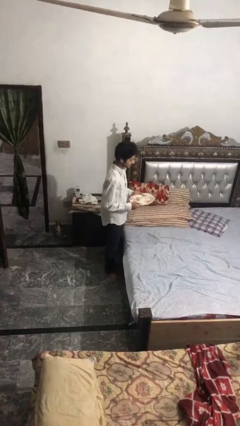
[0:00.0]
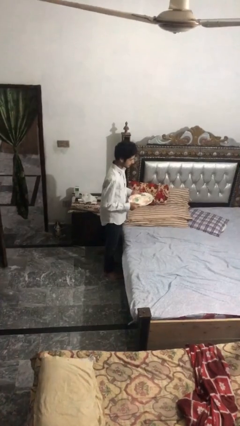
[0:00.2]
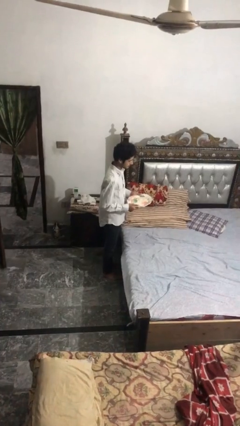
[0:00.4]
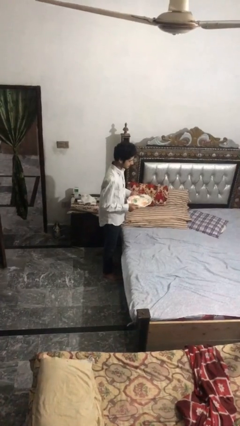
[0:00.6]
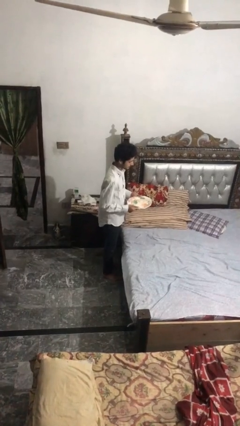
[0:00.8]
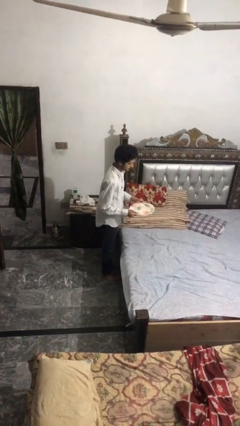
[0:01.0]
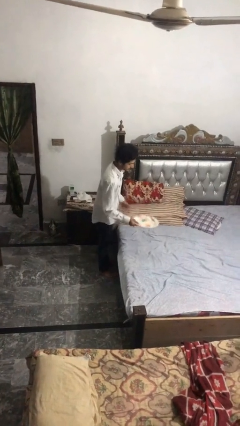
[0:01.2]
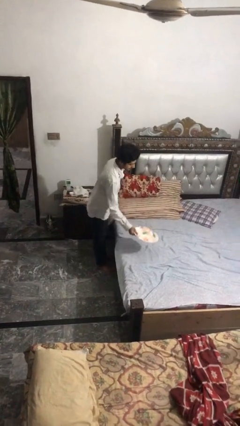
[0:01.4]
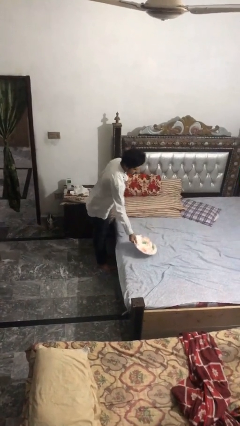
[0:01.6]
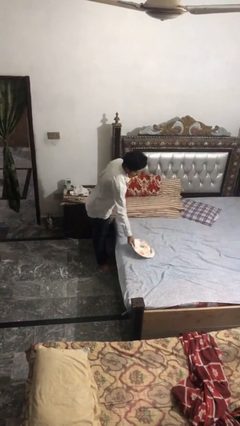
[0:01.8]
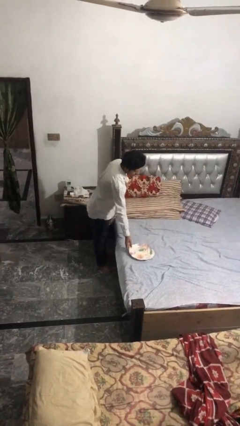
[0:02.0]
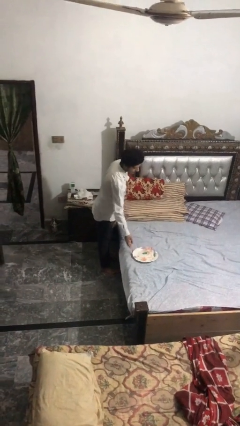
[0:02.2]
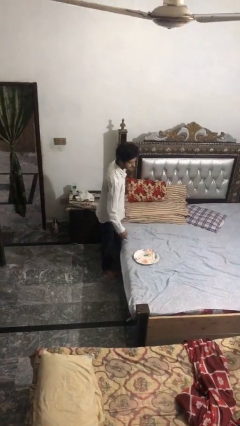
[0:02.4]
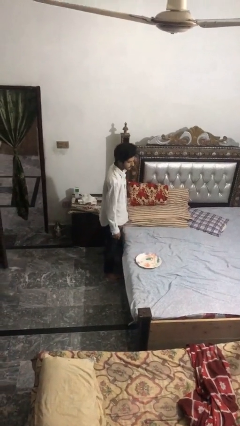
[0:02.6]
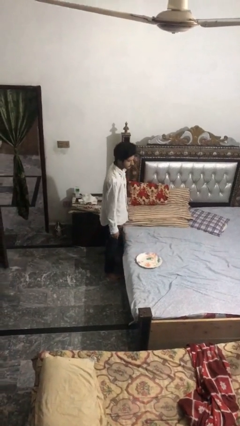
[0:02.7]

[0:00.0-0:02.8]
person puts down object on bed

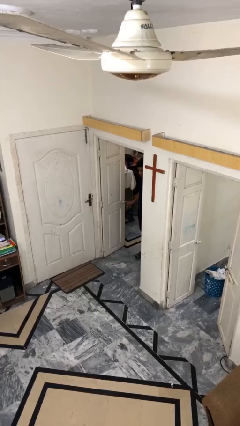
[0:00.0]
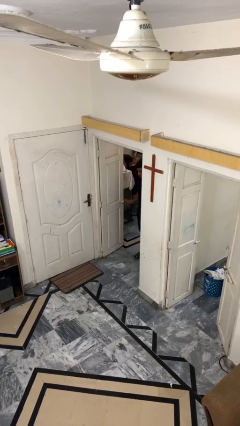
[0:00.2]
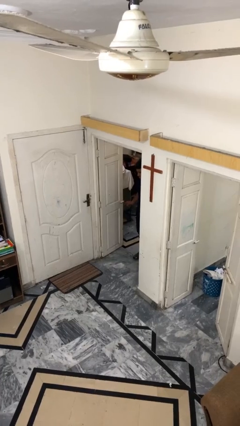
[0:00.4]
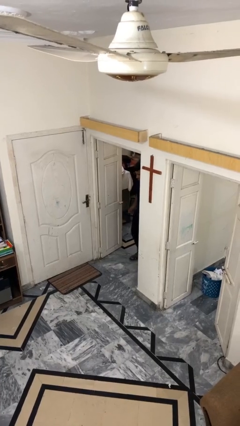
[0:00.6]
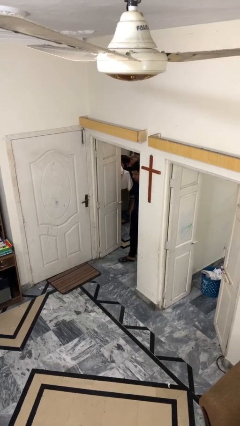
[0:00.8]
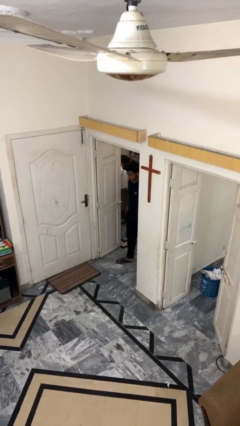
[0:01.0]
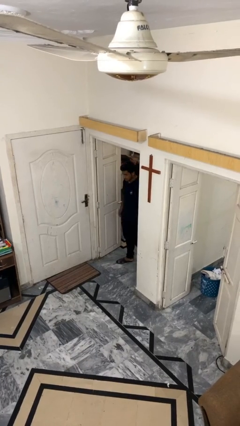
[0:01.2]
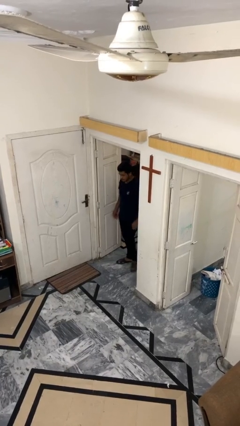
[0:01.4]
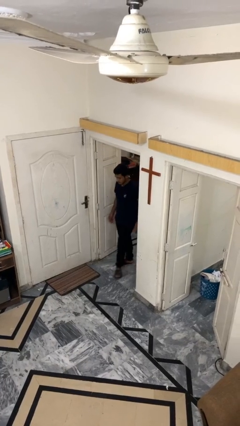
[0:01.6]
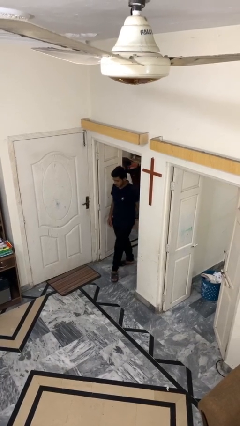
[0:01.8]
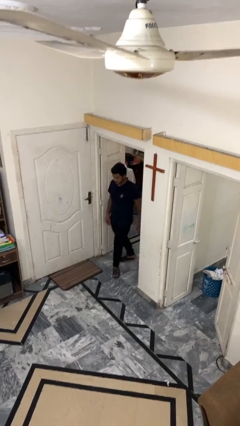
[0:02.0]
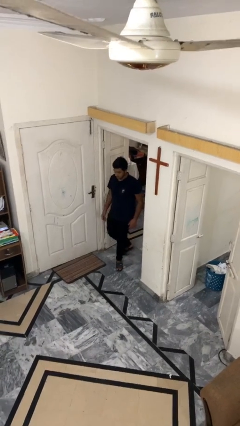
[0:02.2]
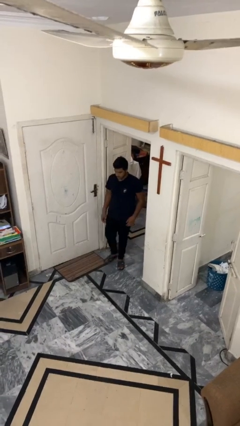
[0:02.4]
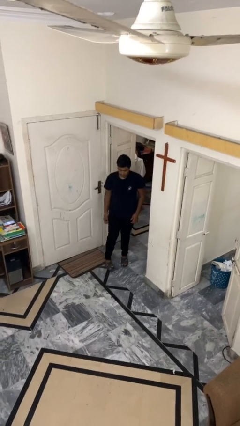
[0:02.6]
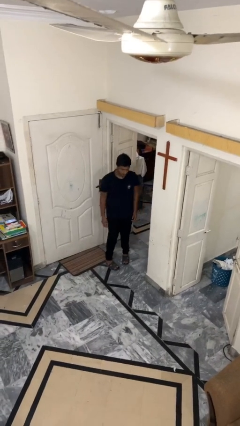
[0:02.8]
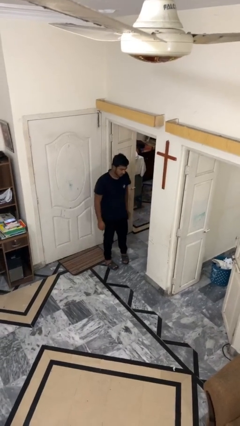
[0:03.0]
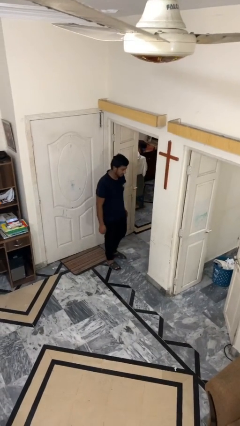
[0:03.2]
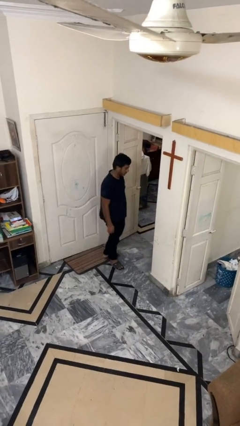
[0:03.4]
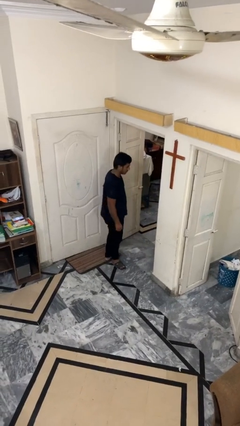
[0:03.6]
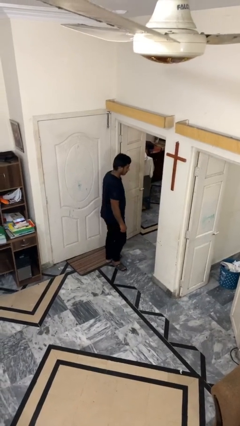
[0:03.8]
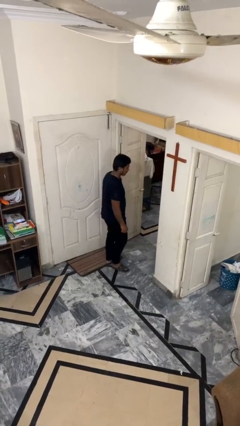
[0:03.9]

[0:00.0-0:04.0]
person enters scene through structure

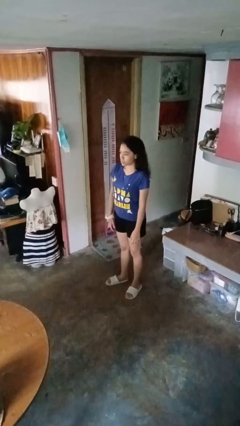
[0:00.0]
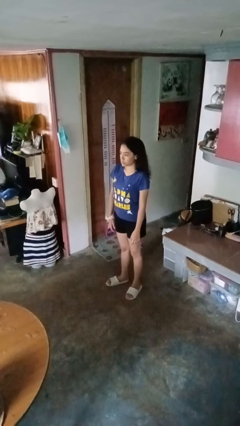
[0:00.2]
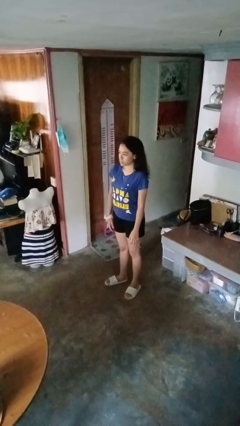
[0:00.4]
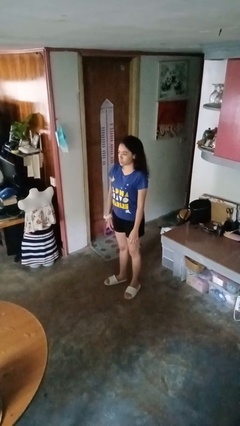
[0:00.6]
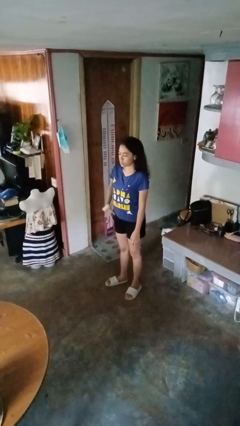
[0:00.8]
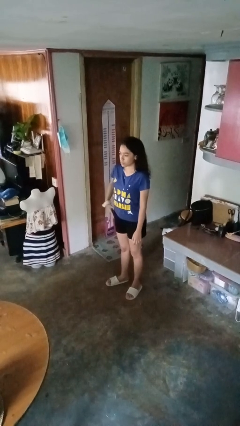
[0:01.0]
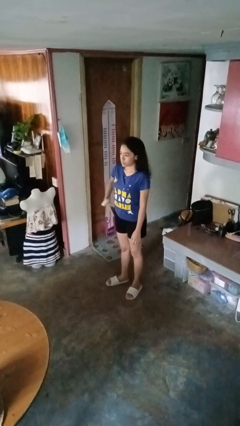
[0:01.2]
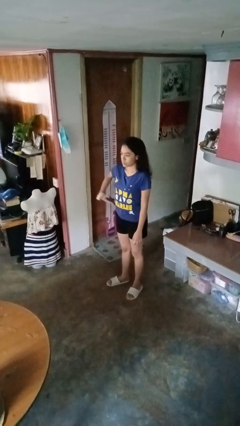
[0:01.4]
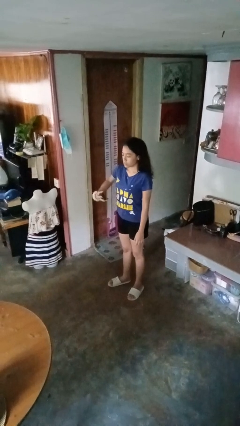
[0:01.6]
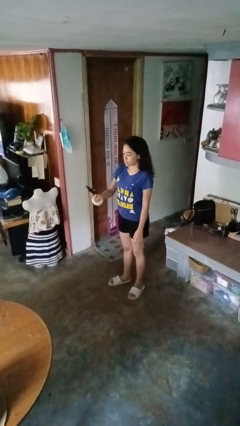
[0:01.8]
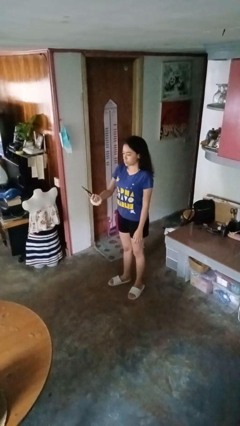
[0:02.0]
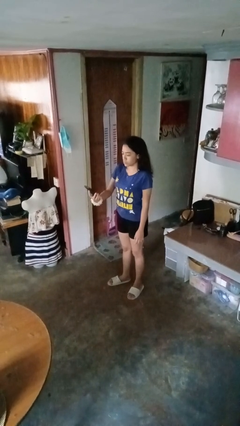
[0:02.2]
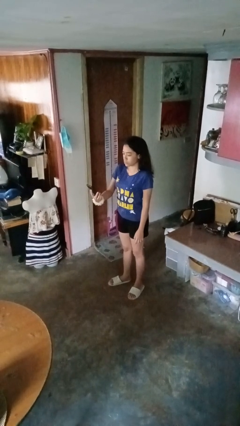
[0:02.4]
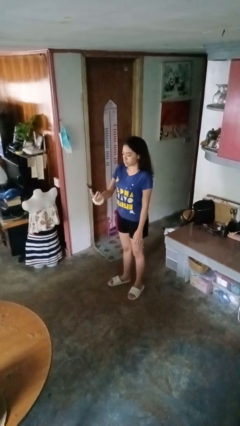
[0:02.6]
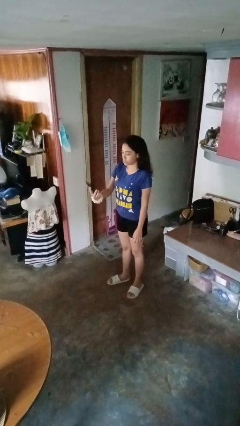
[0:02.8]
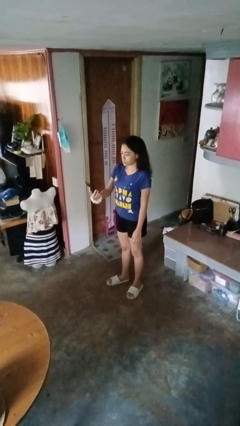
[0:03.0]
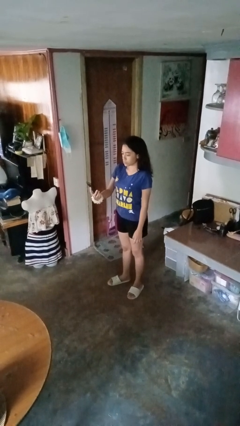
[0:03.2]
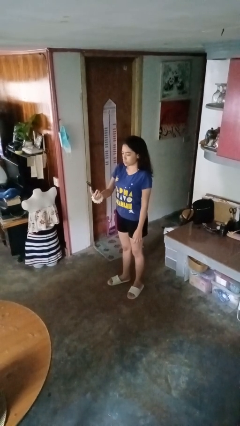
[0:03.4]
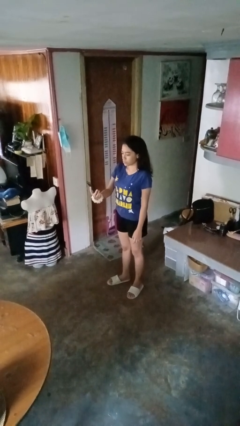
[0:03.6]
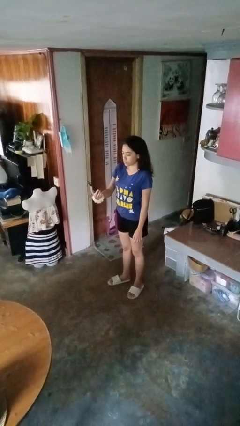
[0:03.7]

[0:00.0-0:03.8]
person takes phone from pocket

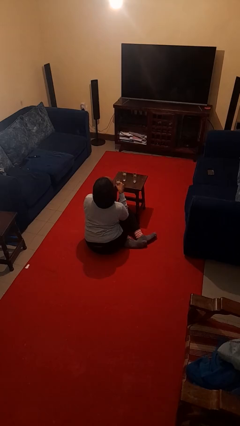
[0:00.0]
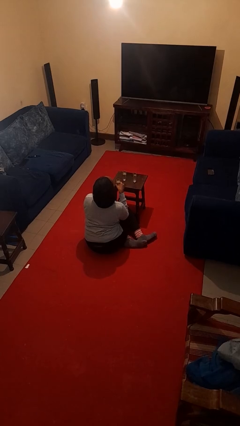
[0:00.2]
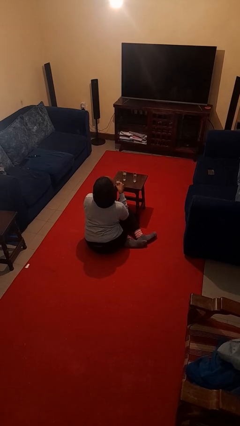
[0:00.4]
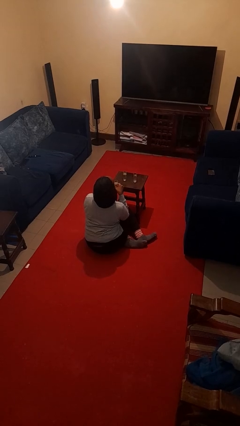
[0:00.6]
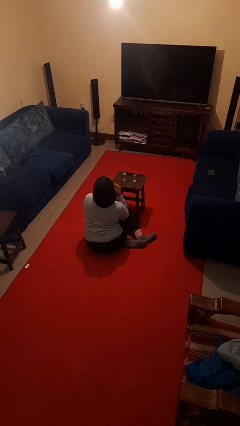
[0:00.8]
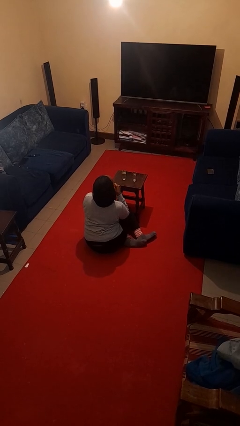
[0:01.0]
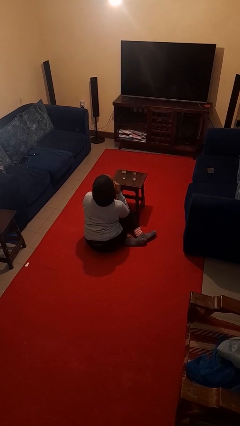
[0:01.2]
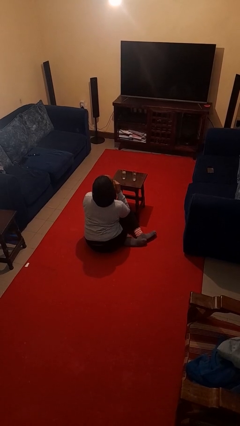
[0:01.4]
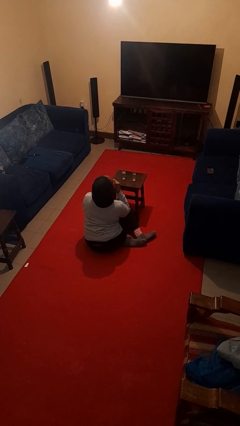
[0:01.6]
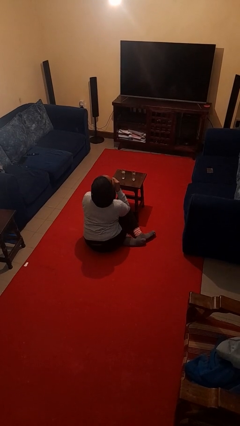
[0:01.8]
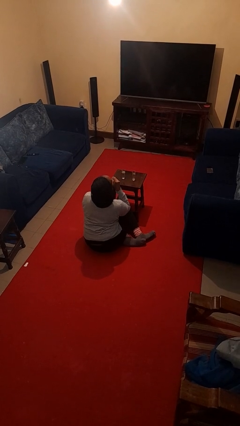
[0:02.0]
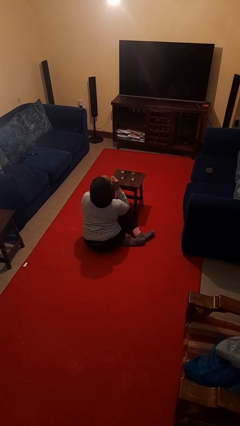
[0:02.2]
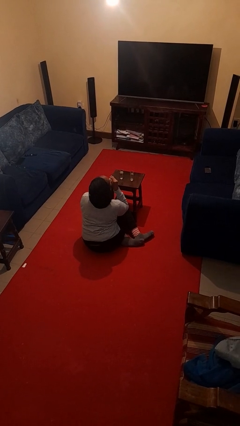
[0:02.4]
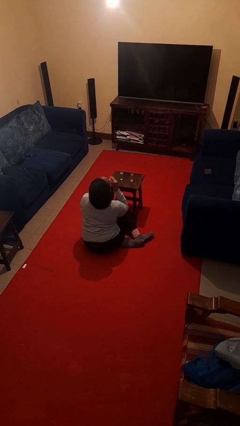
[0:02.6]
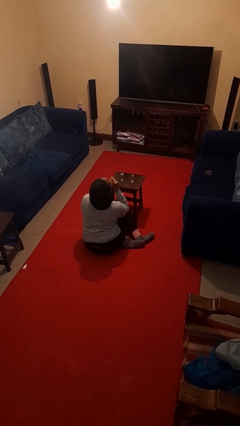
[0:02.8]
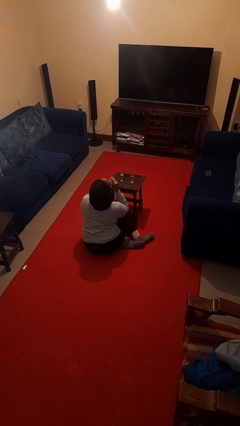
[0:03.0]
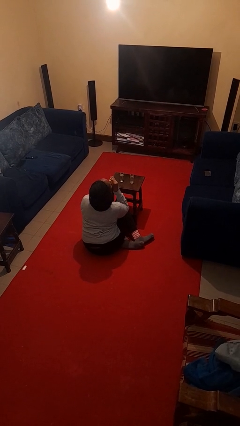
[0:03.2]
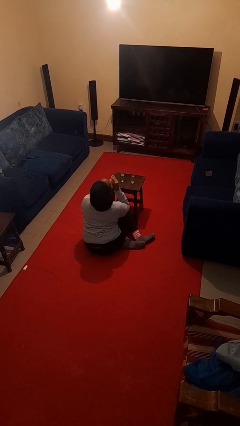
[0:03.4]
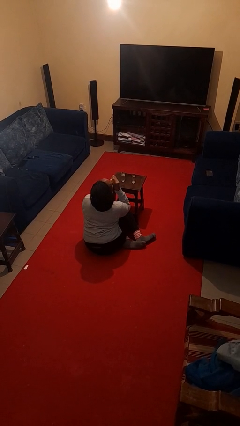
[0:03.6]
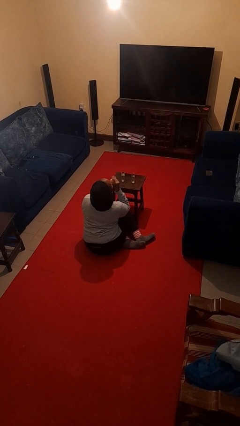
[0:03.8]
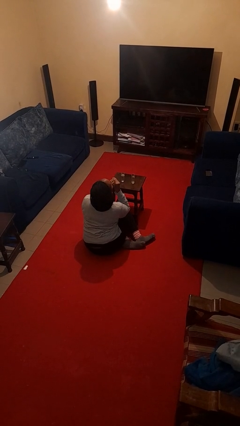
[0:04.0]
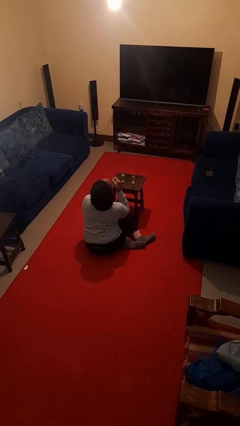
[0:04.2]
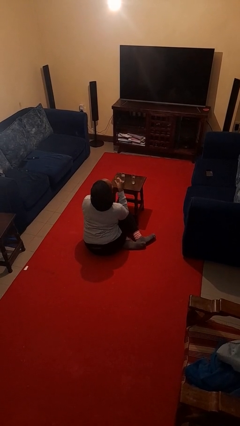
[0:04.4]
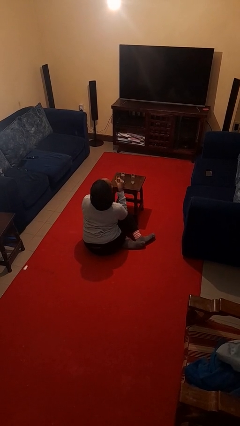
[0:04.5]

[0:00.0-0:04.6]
person drinks from shotglass

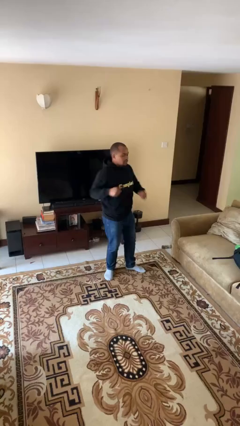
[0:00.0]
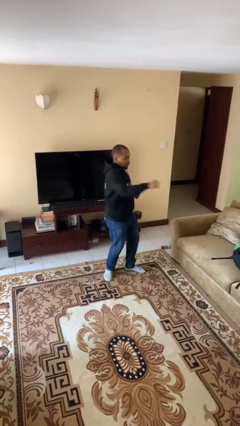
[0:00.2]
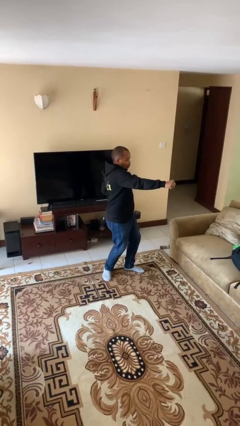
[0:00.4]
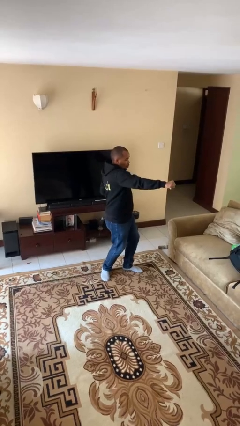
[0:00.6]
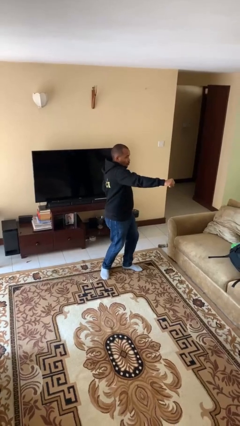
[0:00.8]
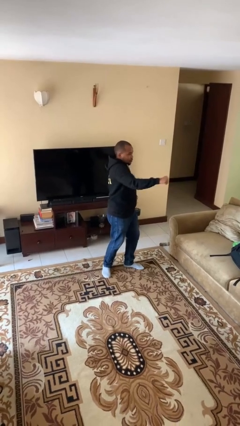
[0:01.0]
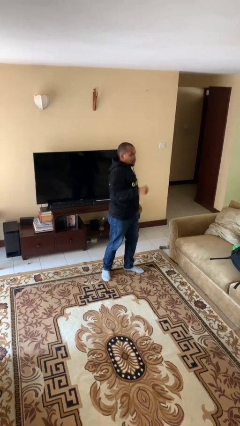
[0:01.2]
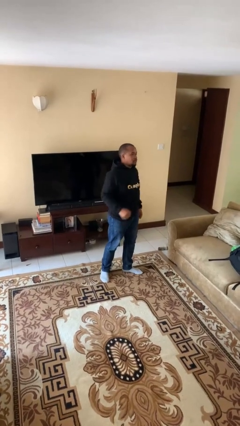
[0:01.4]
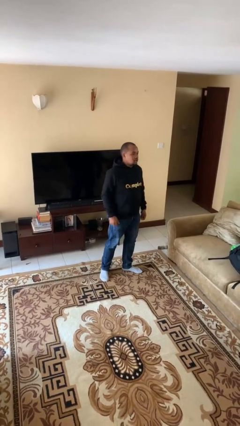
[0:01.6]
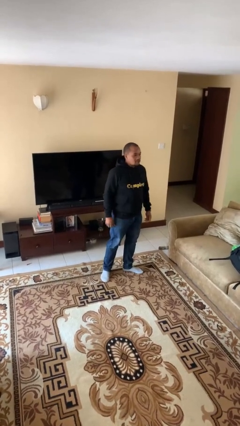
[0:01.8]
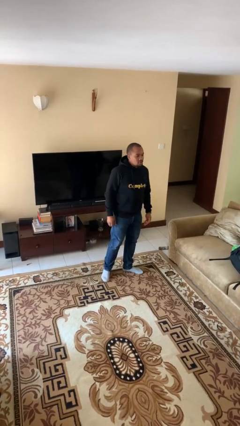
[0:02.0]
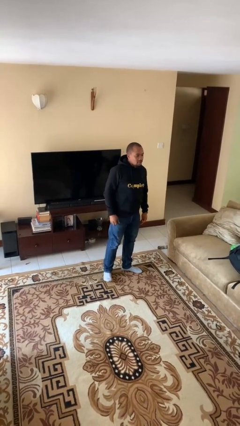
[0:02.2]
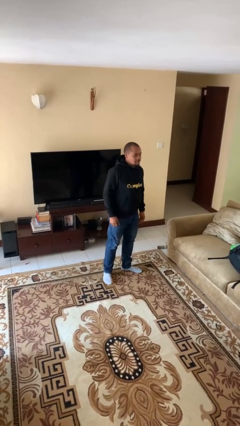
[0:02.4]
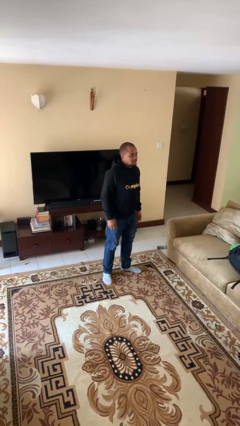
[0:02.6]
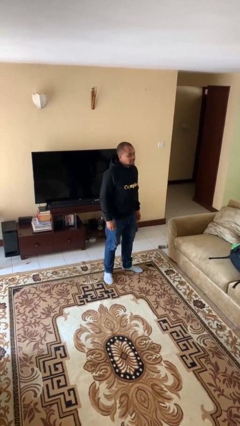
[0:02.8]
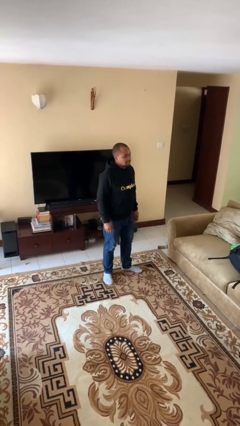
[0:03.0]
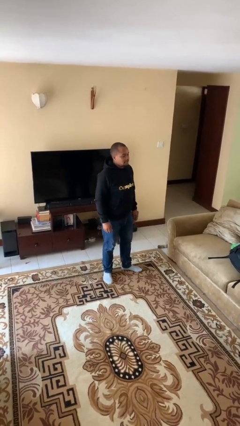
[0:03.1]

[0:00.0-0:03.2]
person punches
